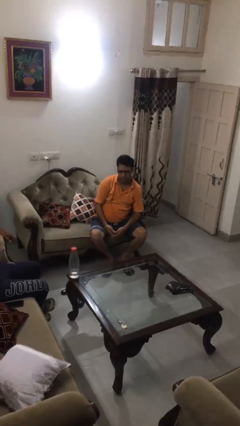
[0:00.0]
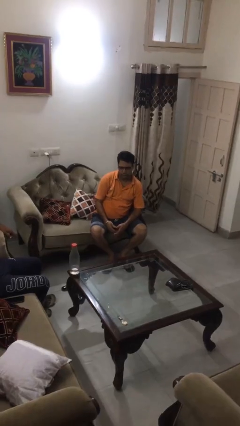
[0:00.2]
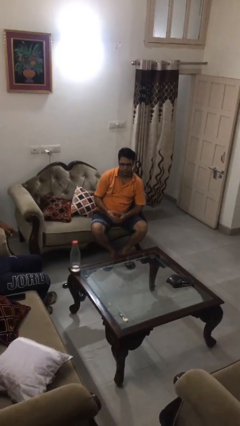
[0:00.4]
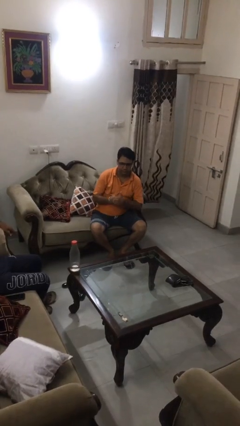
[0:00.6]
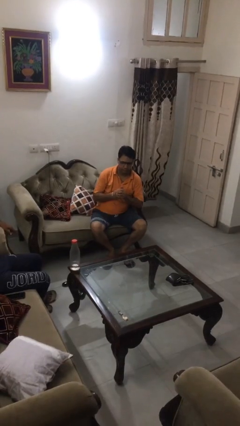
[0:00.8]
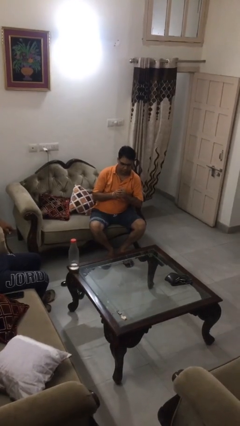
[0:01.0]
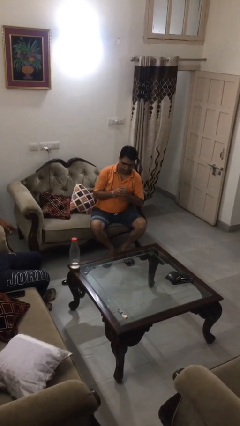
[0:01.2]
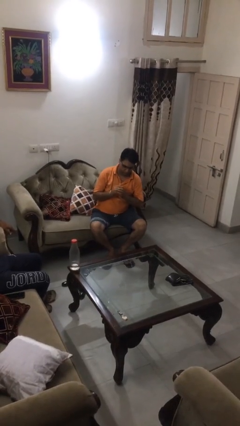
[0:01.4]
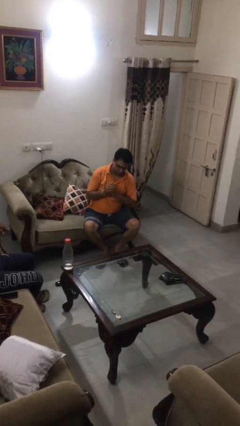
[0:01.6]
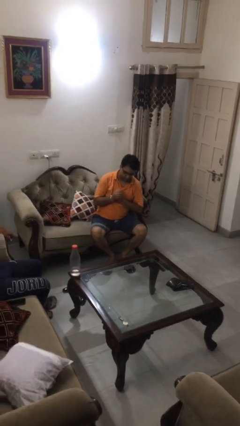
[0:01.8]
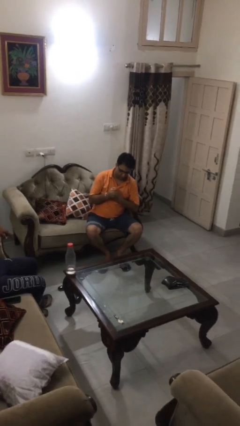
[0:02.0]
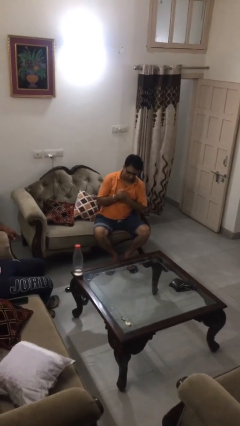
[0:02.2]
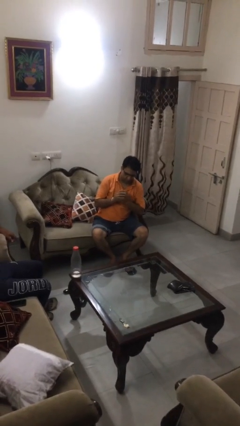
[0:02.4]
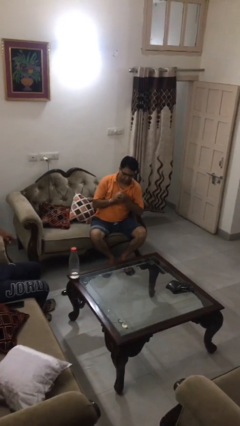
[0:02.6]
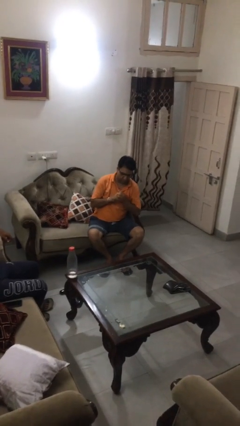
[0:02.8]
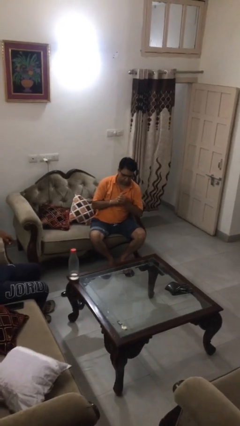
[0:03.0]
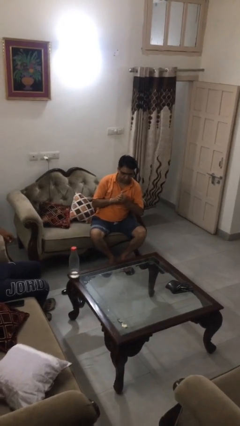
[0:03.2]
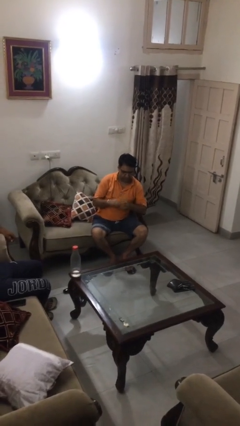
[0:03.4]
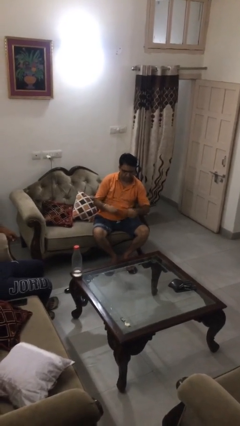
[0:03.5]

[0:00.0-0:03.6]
person cracks knuckles

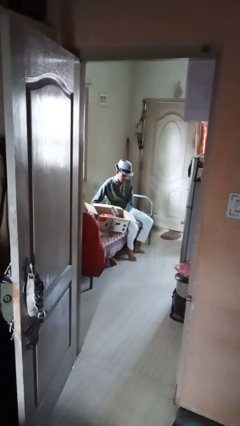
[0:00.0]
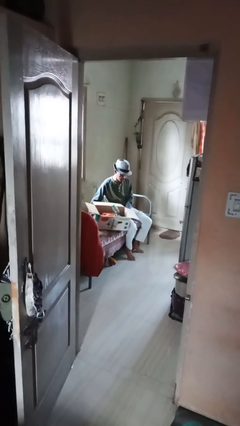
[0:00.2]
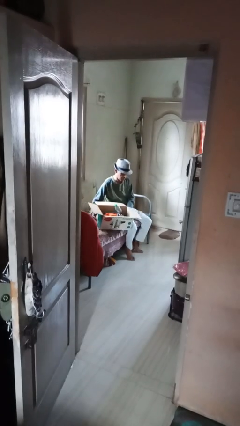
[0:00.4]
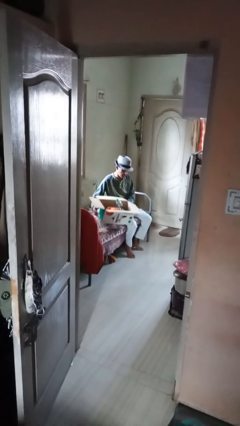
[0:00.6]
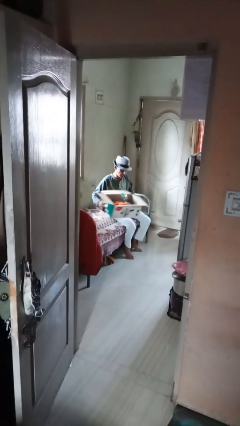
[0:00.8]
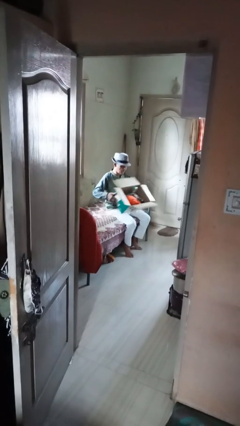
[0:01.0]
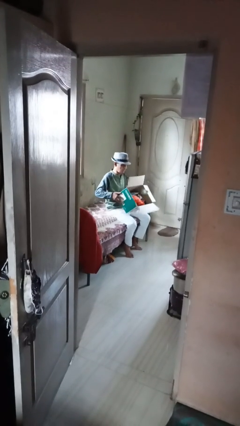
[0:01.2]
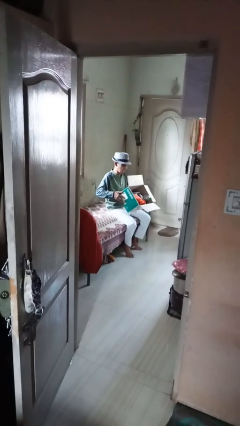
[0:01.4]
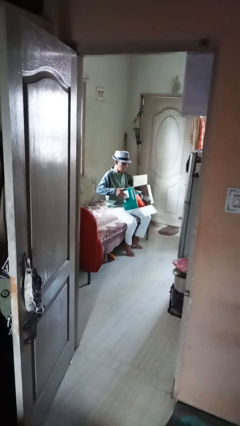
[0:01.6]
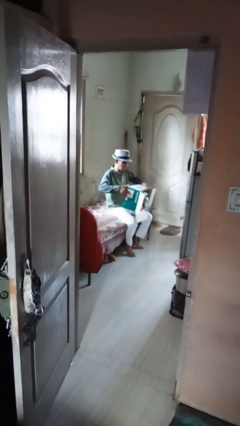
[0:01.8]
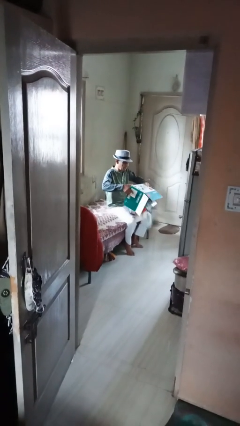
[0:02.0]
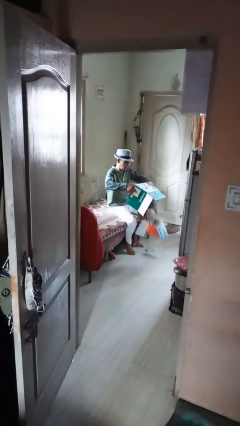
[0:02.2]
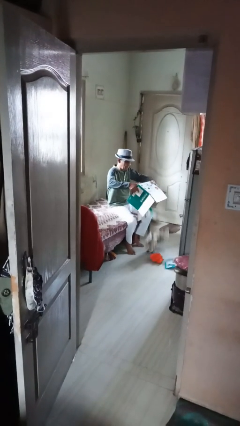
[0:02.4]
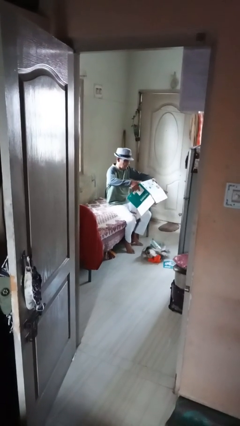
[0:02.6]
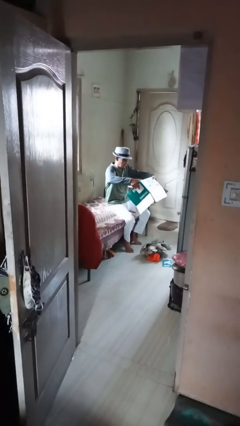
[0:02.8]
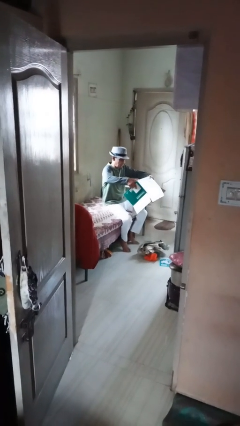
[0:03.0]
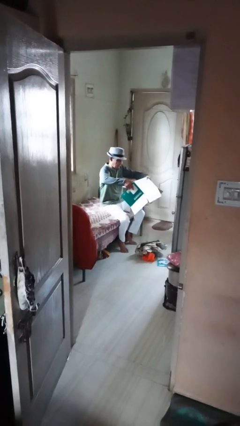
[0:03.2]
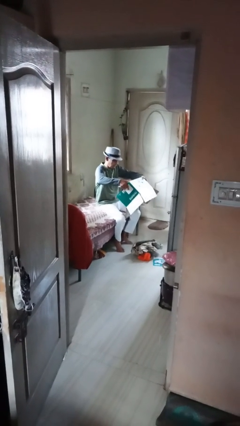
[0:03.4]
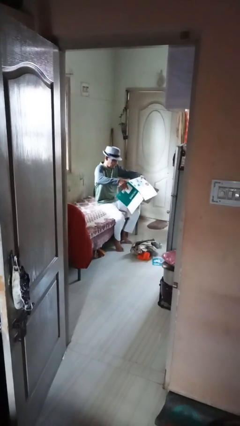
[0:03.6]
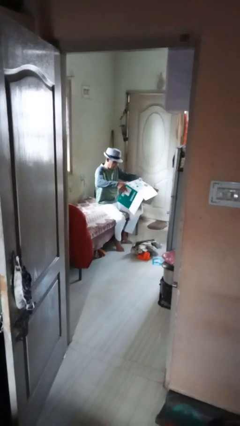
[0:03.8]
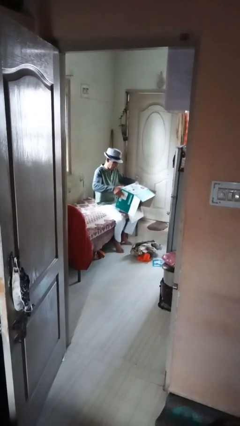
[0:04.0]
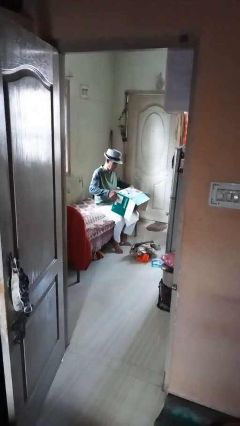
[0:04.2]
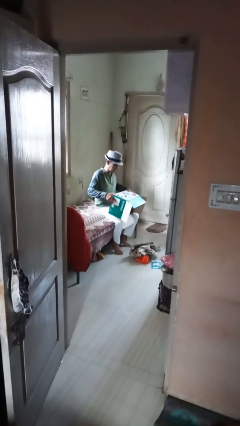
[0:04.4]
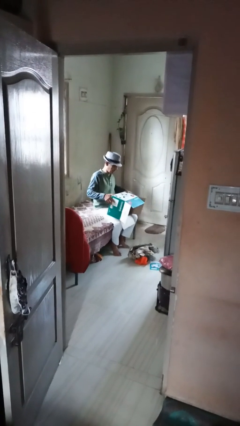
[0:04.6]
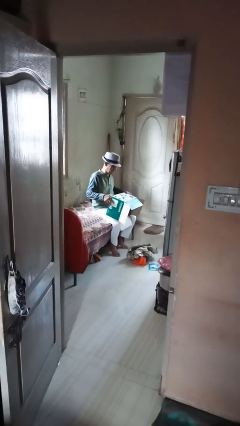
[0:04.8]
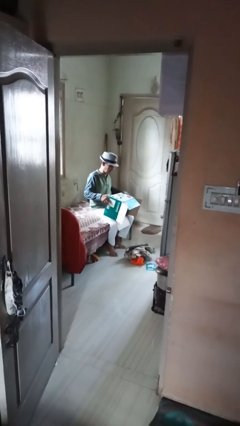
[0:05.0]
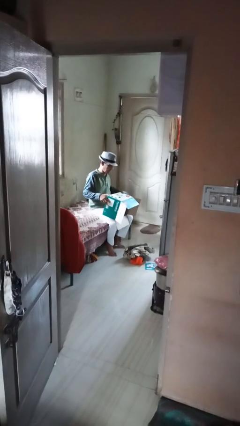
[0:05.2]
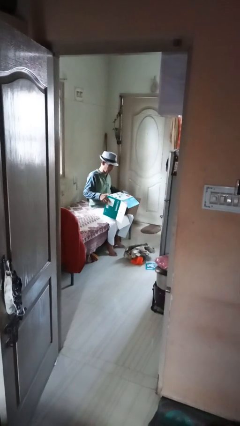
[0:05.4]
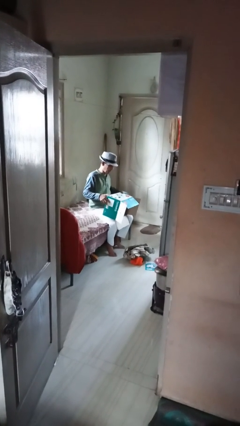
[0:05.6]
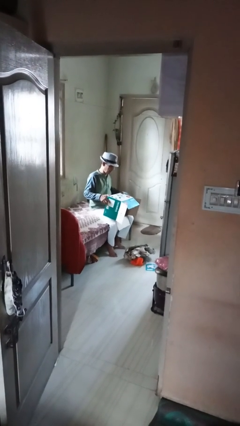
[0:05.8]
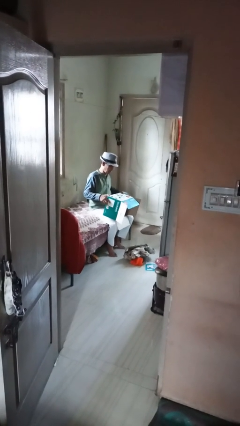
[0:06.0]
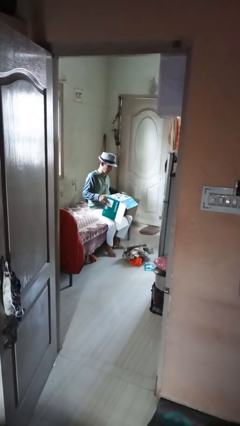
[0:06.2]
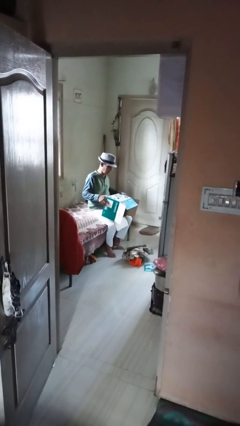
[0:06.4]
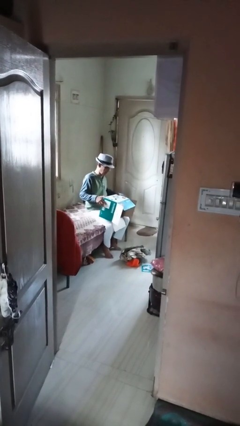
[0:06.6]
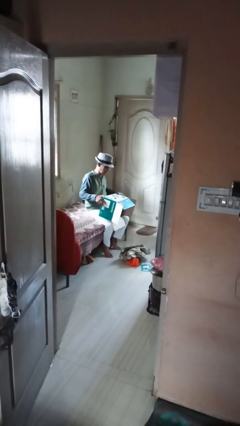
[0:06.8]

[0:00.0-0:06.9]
person unloads box onto floor

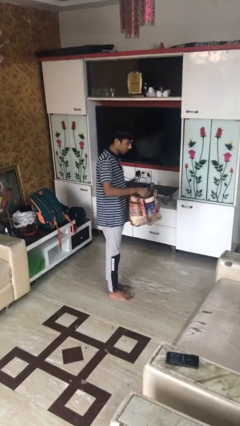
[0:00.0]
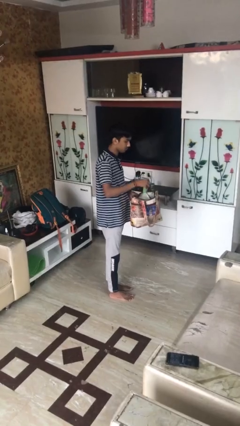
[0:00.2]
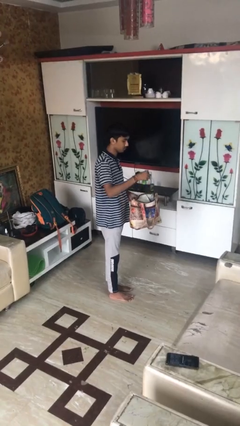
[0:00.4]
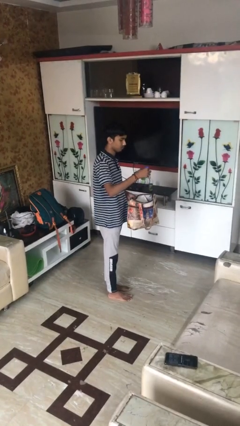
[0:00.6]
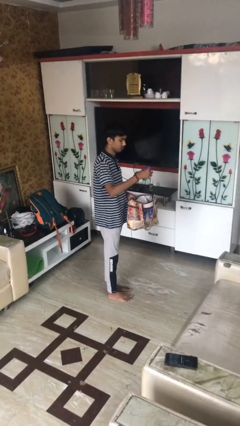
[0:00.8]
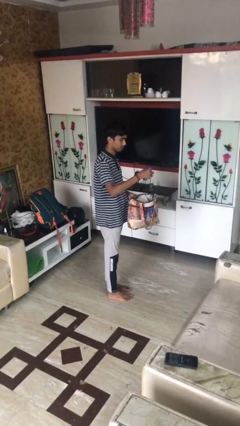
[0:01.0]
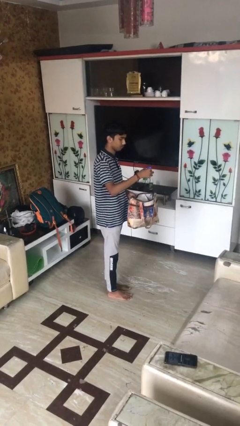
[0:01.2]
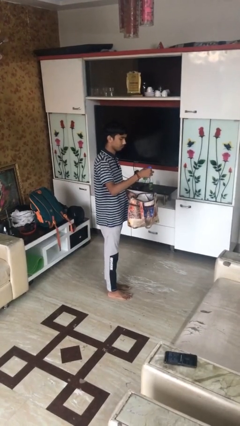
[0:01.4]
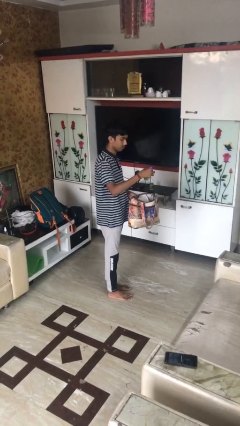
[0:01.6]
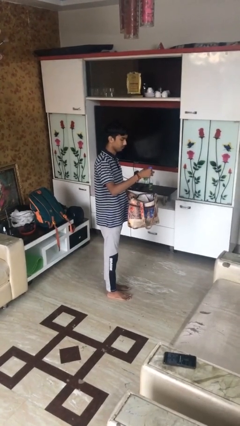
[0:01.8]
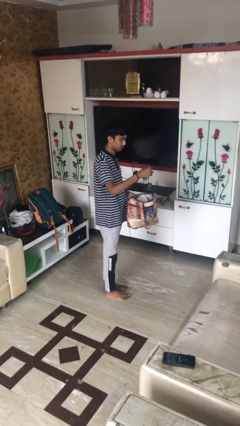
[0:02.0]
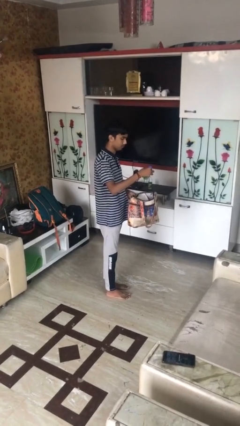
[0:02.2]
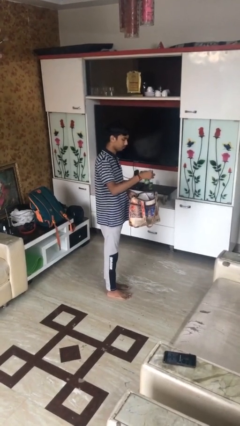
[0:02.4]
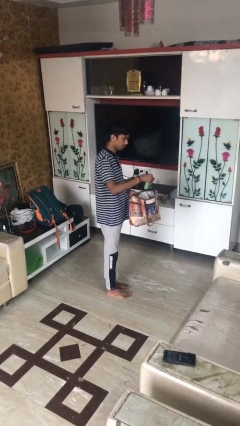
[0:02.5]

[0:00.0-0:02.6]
person takes object from purse

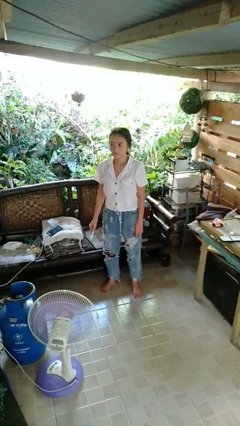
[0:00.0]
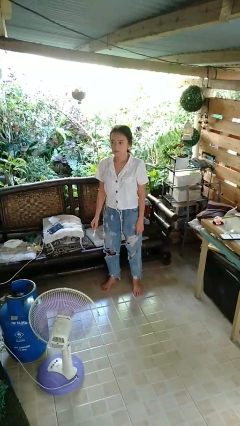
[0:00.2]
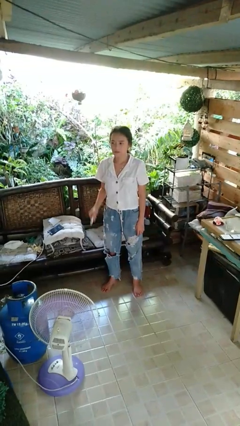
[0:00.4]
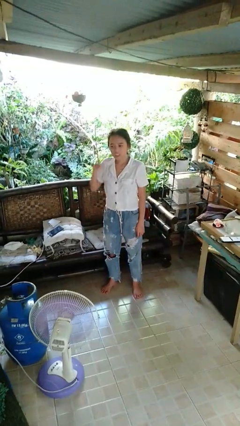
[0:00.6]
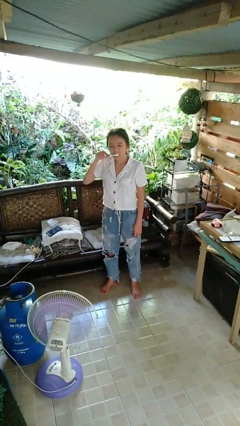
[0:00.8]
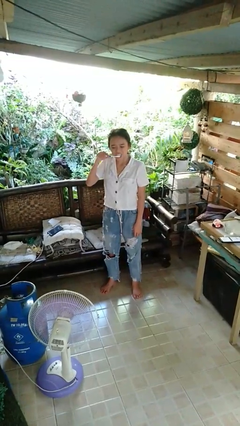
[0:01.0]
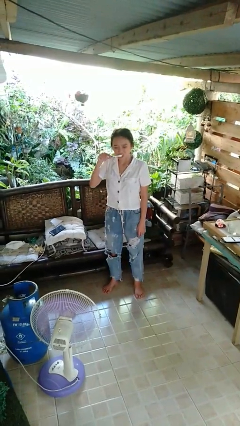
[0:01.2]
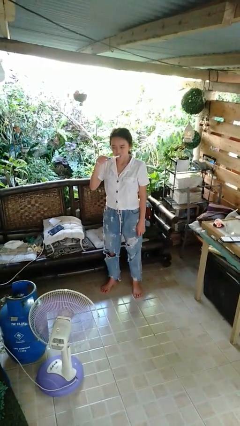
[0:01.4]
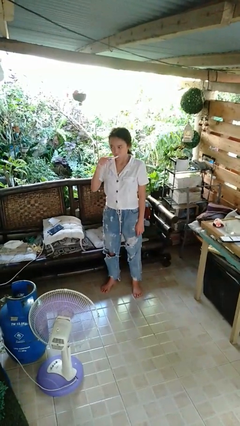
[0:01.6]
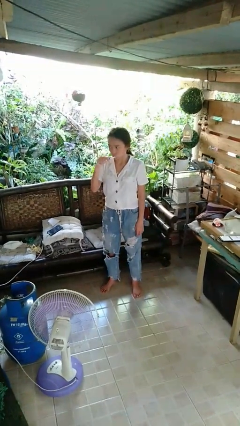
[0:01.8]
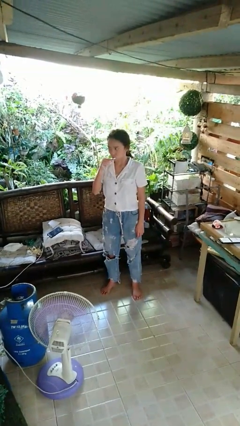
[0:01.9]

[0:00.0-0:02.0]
person brushes teeth

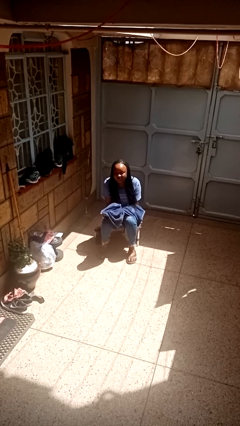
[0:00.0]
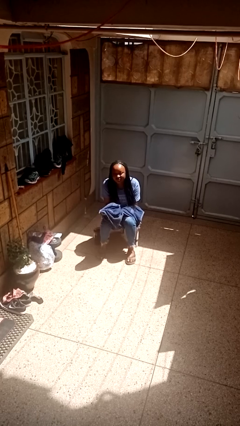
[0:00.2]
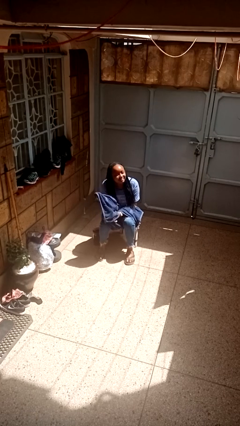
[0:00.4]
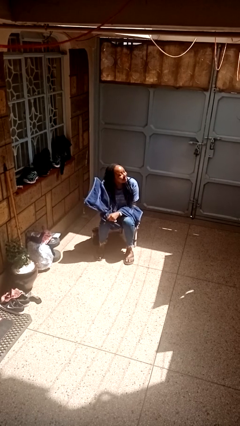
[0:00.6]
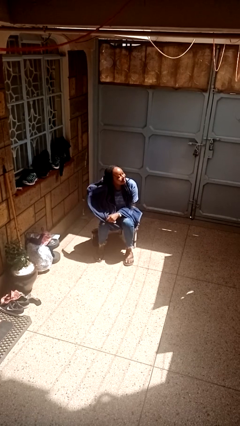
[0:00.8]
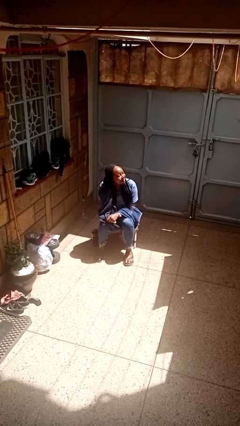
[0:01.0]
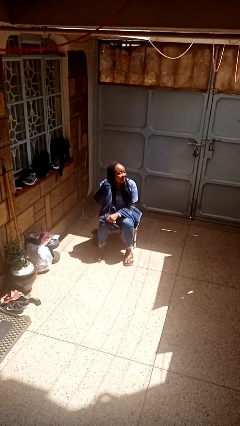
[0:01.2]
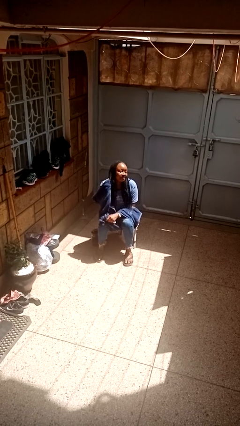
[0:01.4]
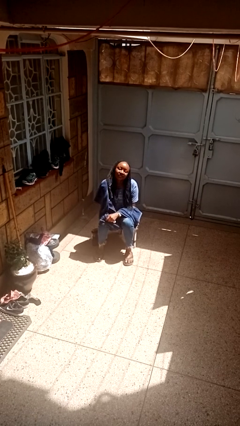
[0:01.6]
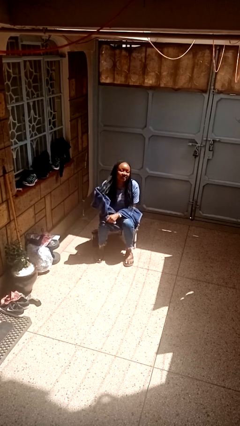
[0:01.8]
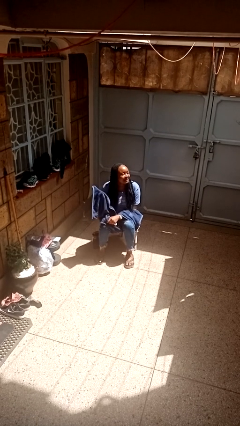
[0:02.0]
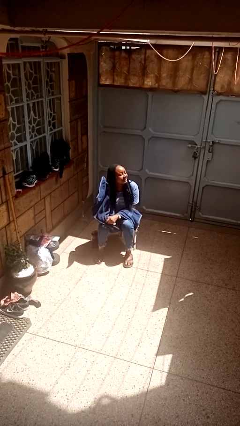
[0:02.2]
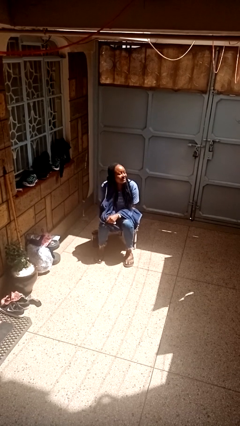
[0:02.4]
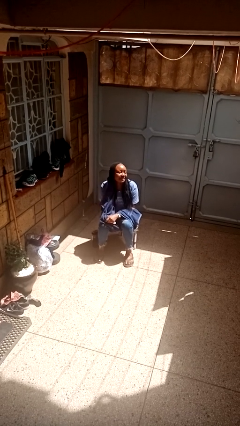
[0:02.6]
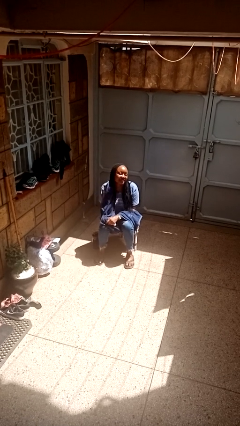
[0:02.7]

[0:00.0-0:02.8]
person dries hair with towel
